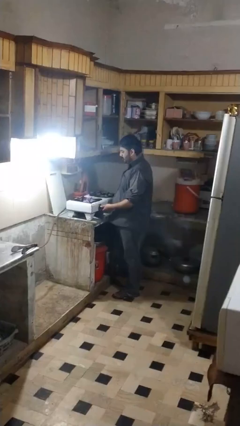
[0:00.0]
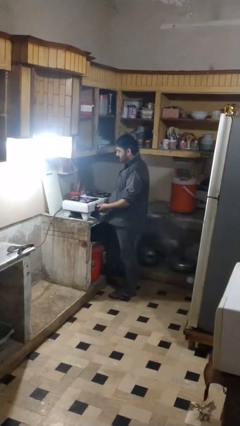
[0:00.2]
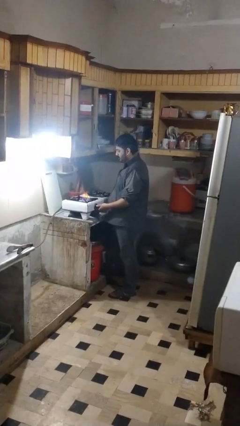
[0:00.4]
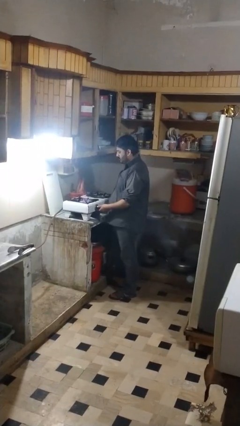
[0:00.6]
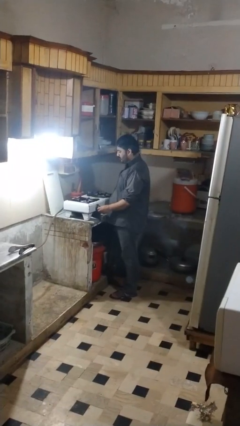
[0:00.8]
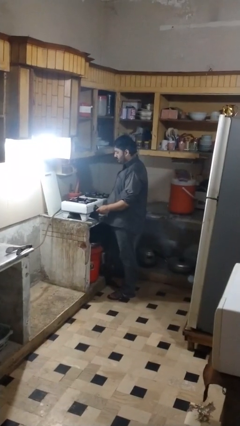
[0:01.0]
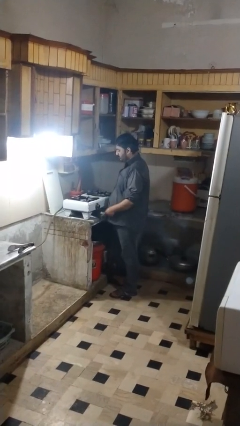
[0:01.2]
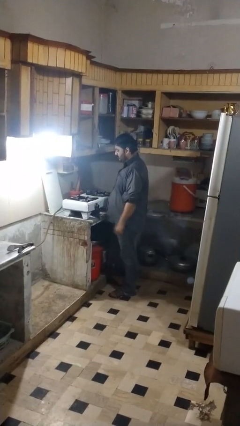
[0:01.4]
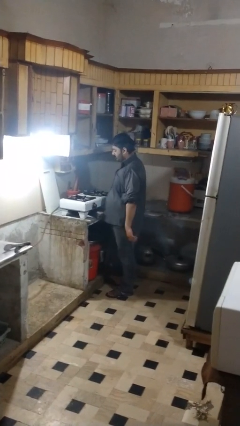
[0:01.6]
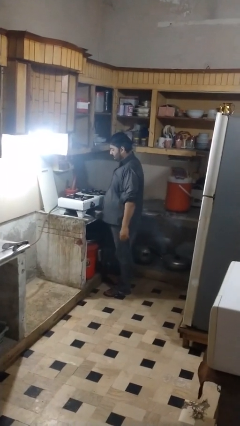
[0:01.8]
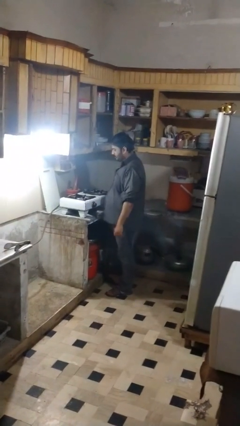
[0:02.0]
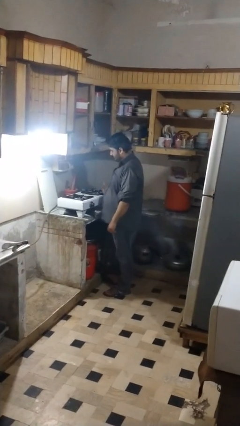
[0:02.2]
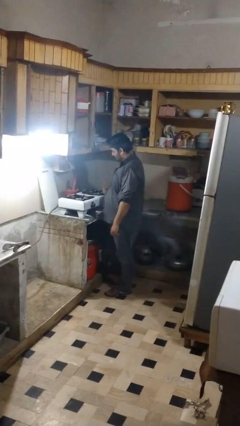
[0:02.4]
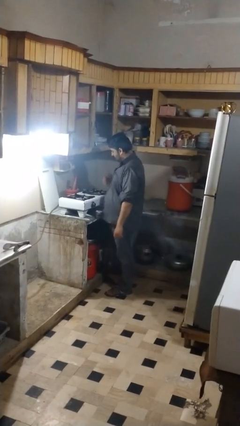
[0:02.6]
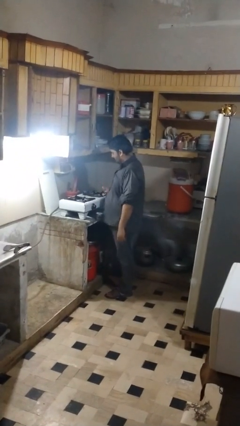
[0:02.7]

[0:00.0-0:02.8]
person turns off stovetop

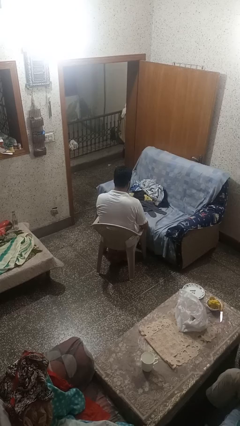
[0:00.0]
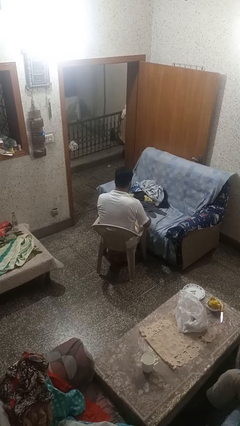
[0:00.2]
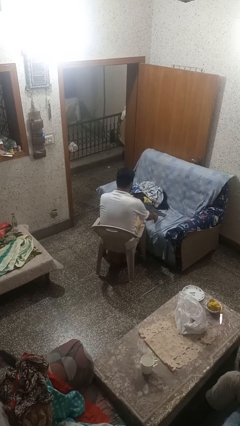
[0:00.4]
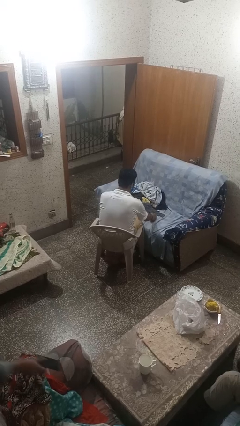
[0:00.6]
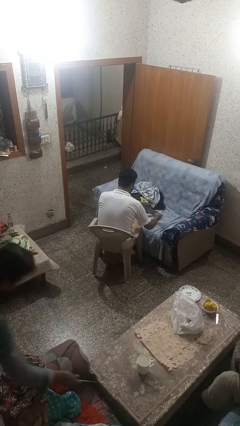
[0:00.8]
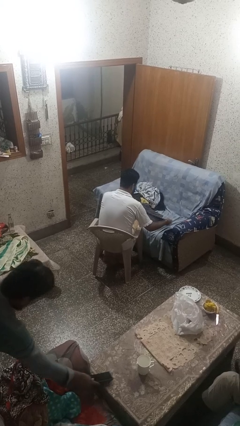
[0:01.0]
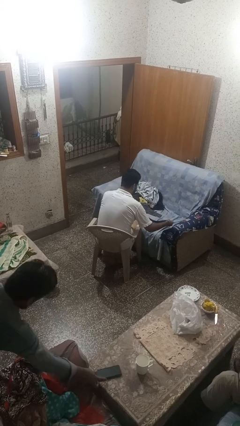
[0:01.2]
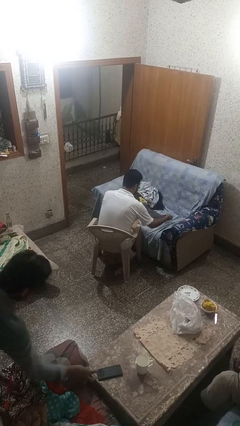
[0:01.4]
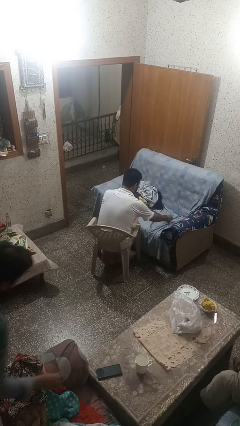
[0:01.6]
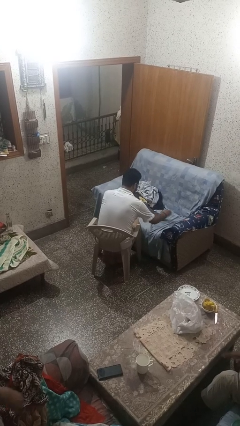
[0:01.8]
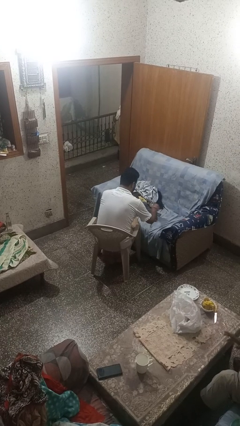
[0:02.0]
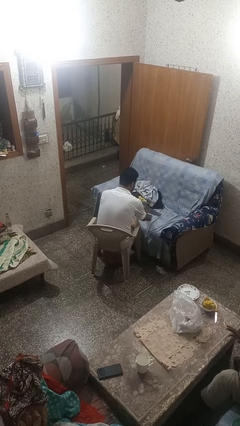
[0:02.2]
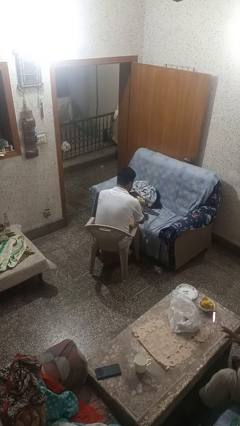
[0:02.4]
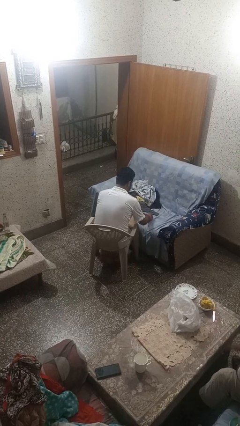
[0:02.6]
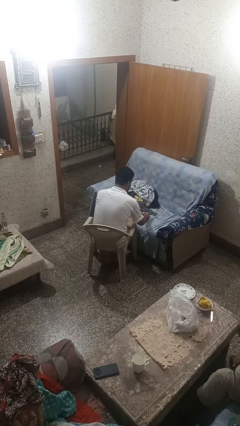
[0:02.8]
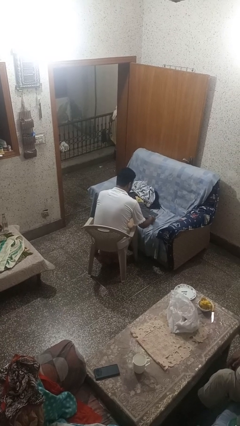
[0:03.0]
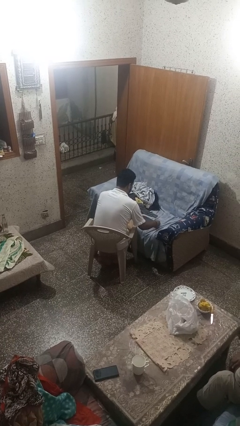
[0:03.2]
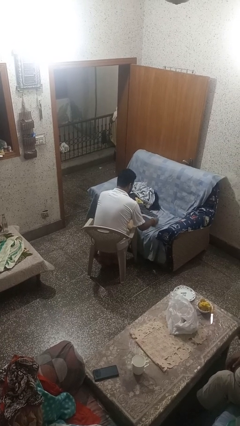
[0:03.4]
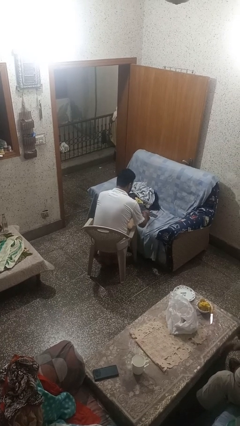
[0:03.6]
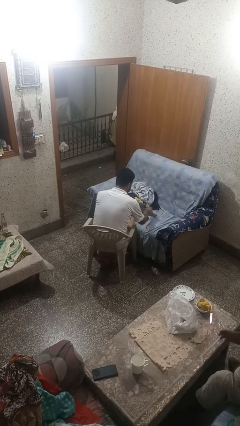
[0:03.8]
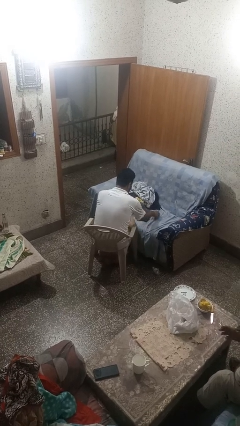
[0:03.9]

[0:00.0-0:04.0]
person folds socks

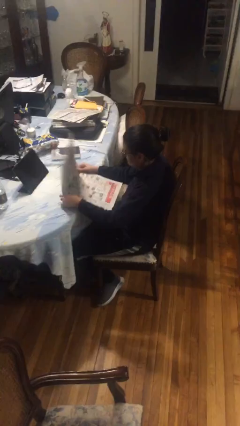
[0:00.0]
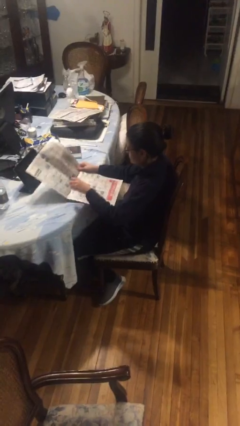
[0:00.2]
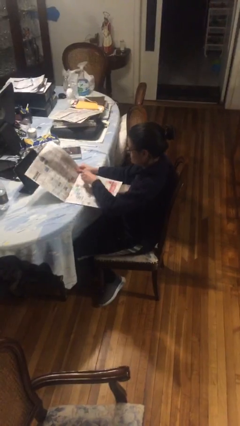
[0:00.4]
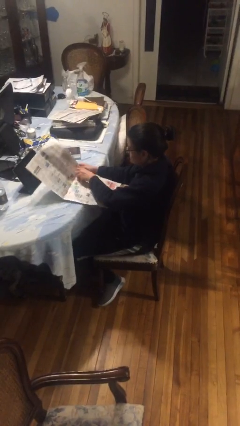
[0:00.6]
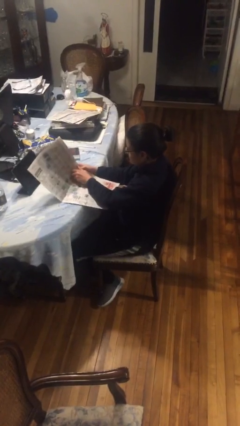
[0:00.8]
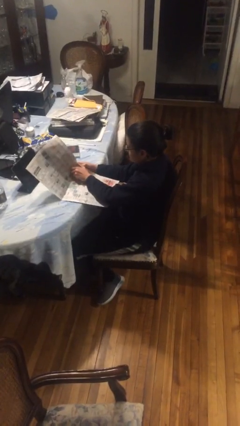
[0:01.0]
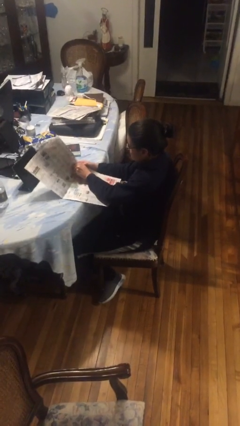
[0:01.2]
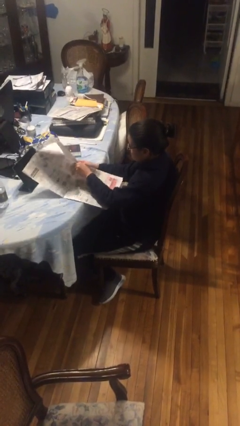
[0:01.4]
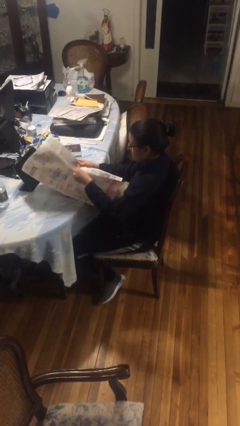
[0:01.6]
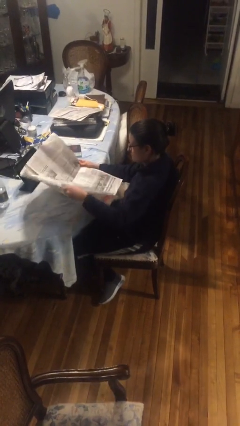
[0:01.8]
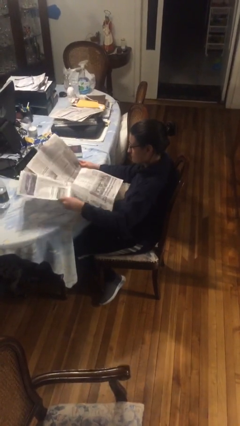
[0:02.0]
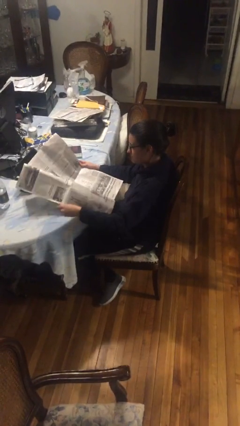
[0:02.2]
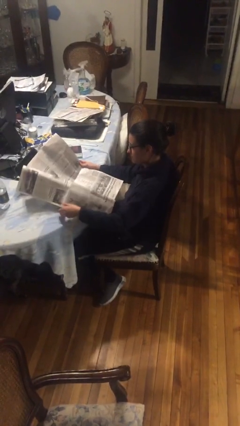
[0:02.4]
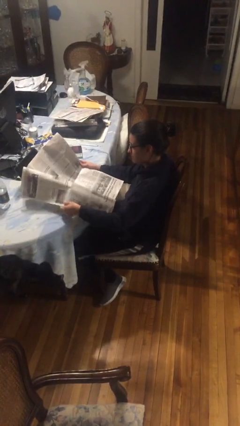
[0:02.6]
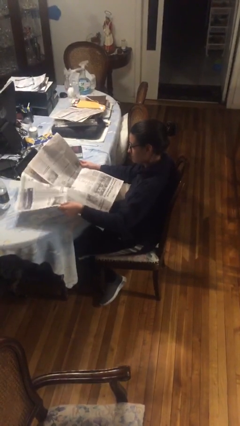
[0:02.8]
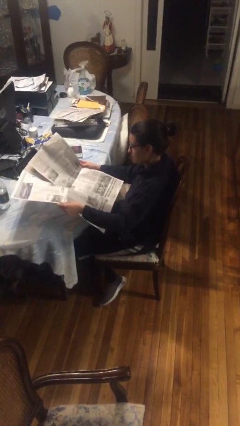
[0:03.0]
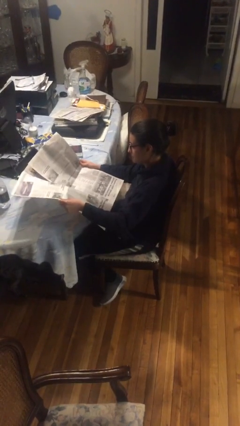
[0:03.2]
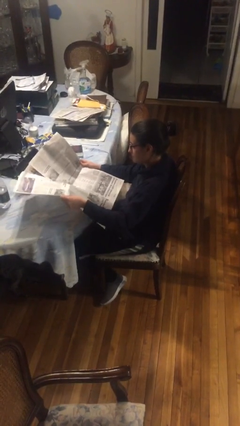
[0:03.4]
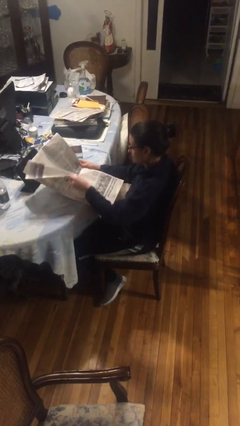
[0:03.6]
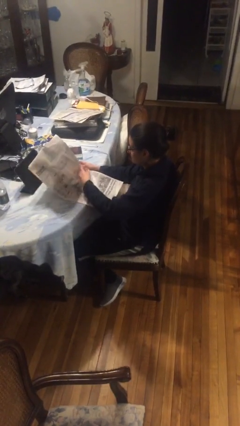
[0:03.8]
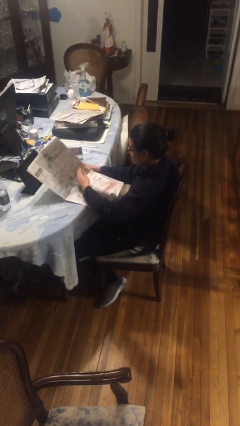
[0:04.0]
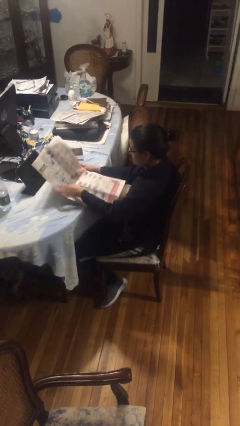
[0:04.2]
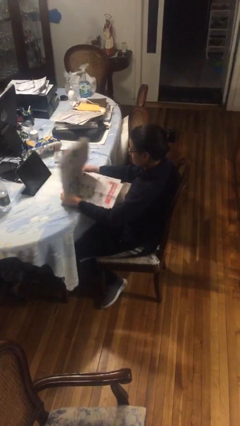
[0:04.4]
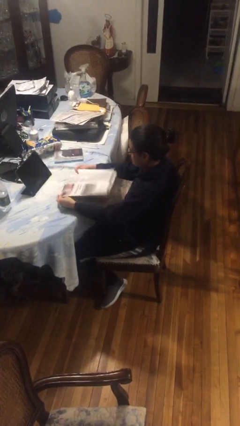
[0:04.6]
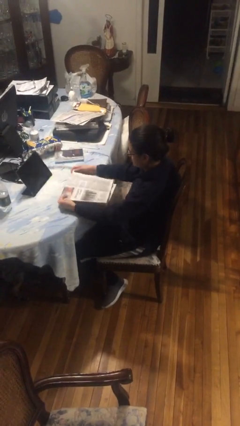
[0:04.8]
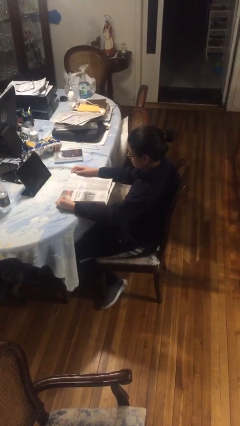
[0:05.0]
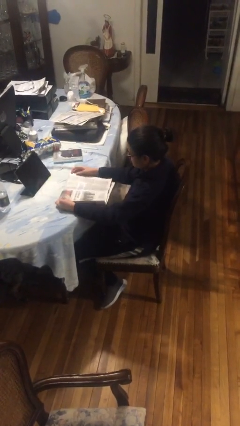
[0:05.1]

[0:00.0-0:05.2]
person reads newspaper

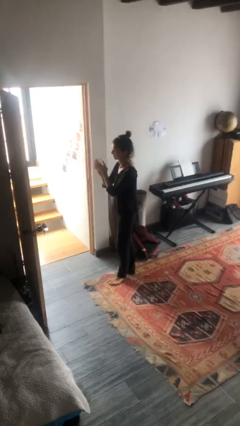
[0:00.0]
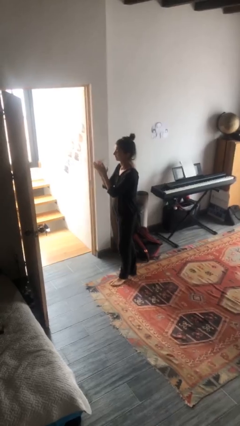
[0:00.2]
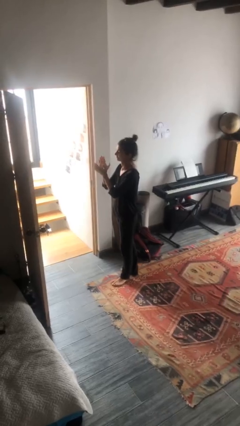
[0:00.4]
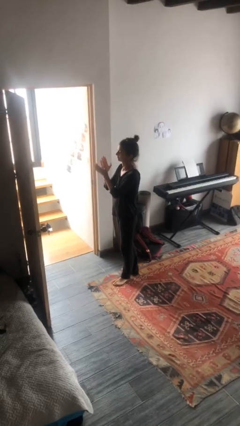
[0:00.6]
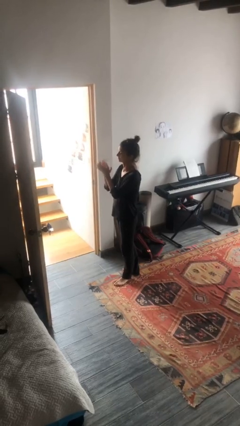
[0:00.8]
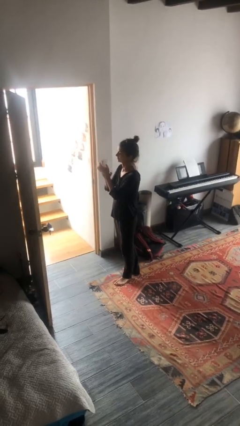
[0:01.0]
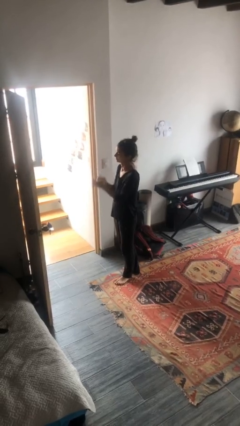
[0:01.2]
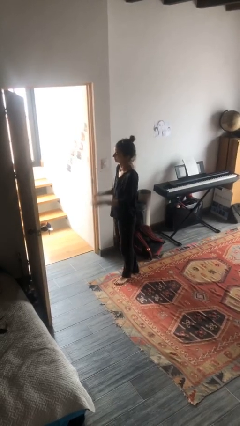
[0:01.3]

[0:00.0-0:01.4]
person claps hands

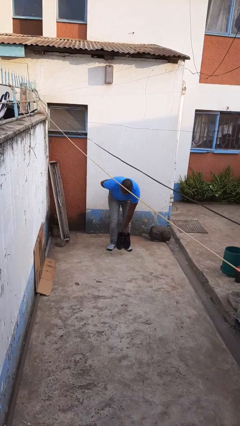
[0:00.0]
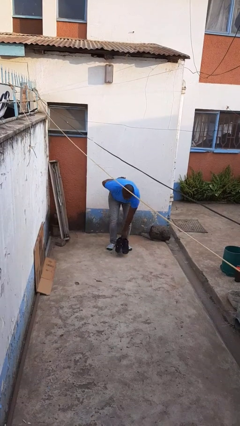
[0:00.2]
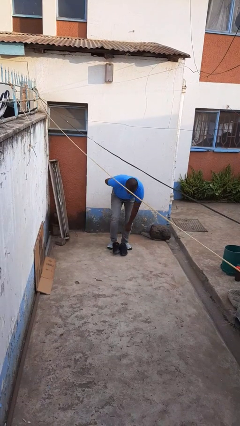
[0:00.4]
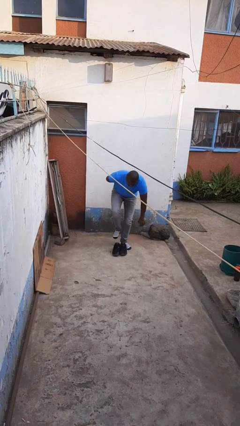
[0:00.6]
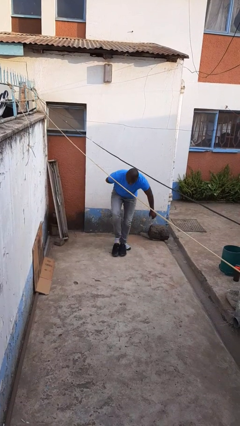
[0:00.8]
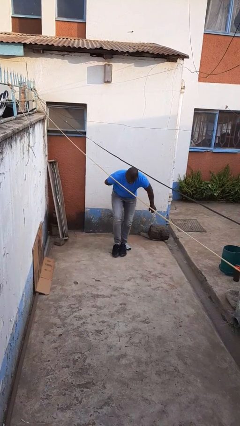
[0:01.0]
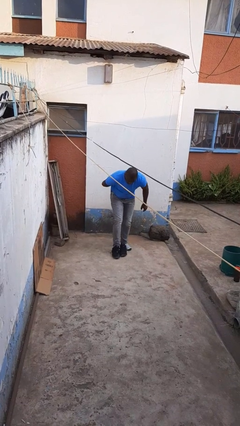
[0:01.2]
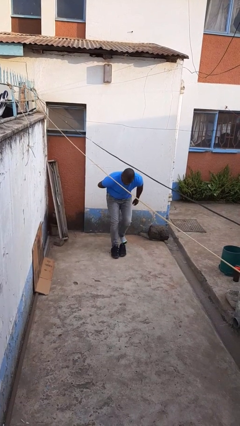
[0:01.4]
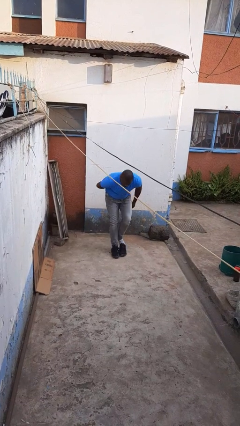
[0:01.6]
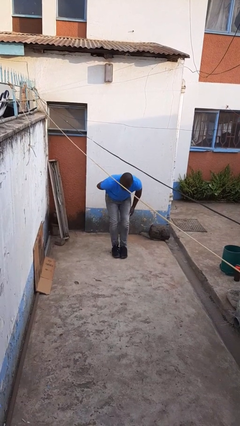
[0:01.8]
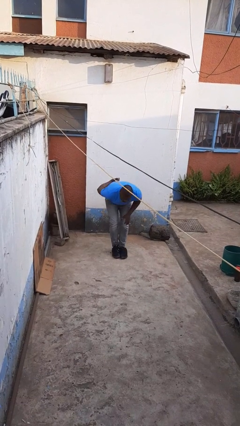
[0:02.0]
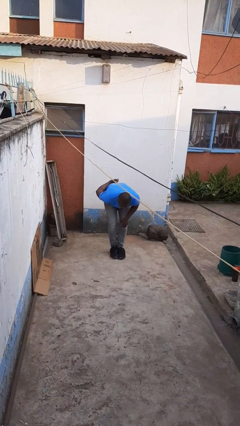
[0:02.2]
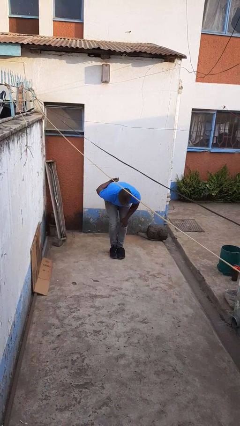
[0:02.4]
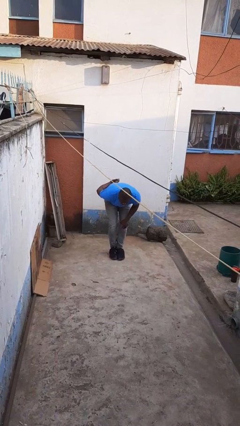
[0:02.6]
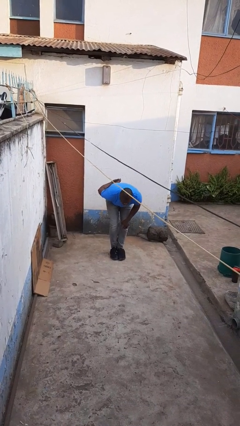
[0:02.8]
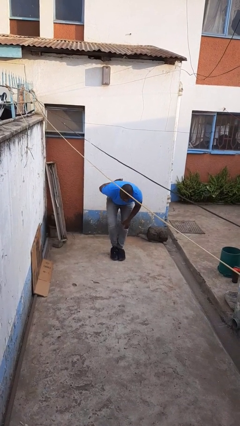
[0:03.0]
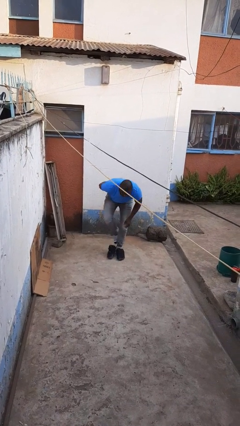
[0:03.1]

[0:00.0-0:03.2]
person puts on shoes

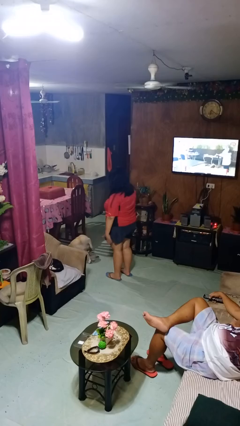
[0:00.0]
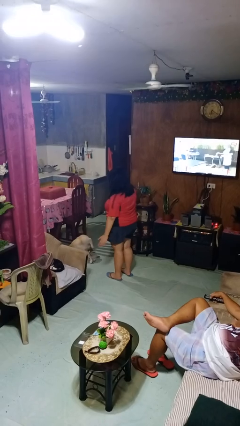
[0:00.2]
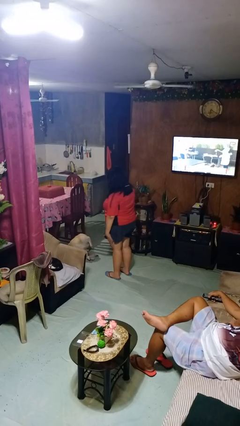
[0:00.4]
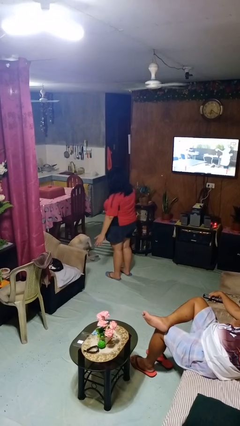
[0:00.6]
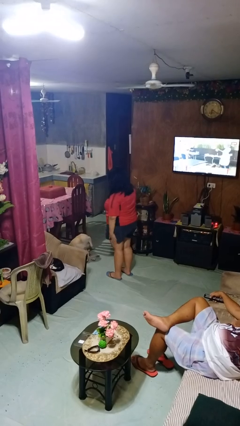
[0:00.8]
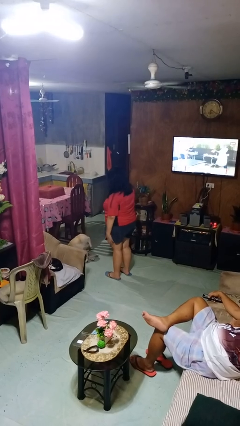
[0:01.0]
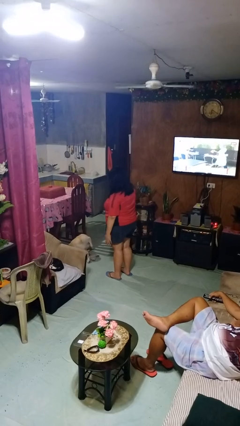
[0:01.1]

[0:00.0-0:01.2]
person slaps hands on thighs

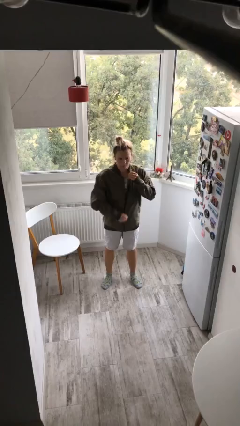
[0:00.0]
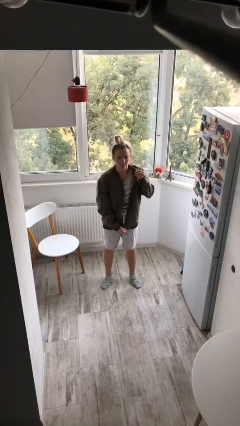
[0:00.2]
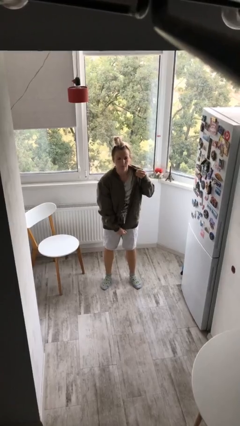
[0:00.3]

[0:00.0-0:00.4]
person unzips jacket
